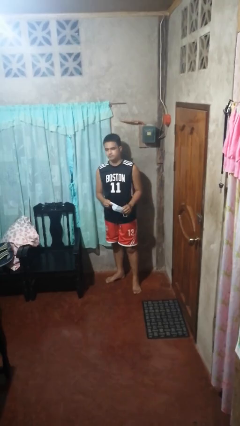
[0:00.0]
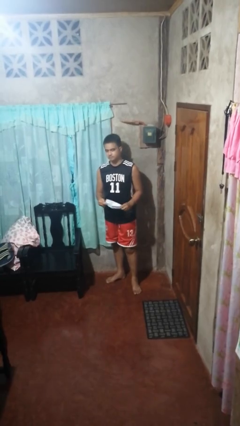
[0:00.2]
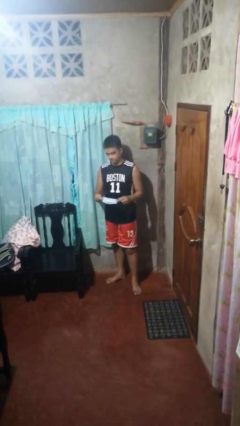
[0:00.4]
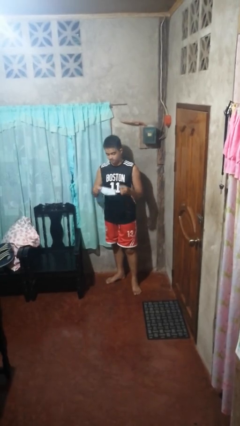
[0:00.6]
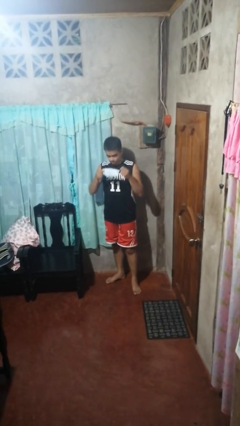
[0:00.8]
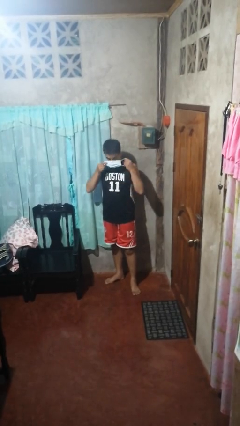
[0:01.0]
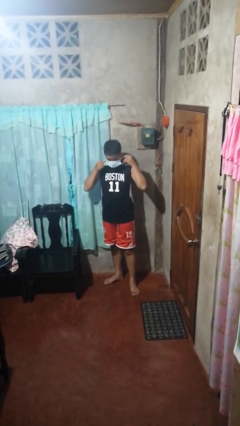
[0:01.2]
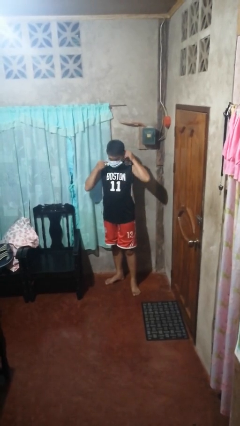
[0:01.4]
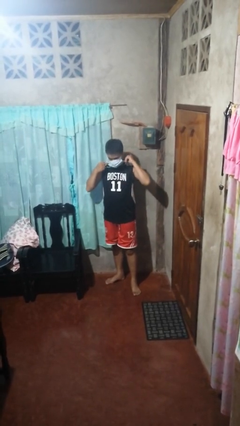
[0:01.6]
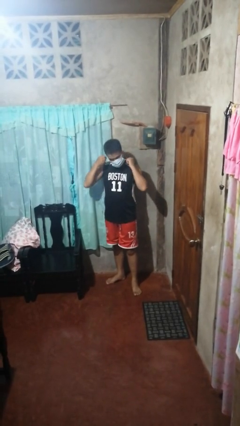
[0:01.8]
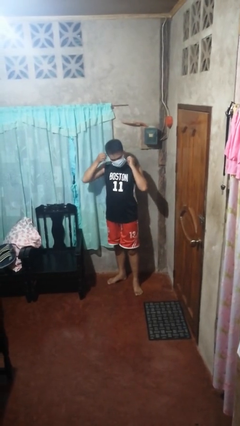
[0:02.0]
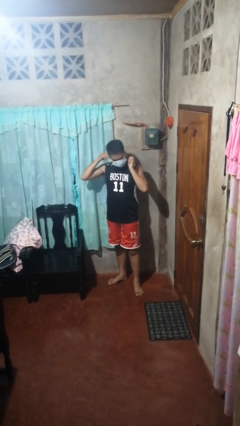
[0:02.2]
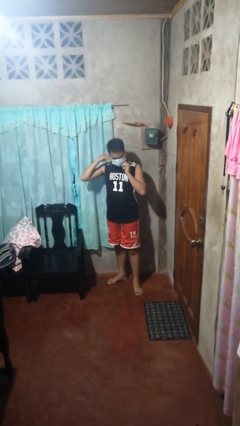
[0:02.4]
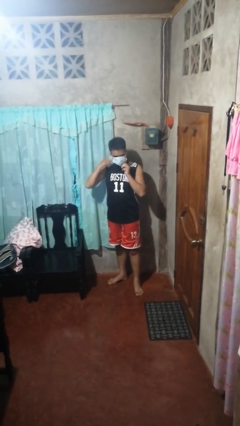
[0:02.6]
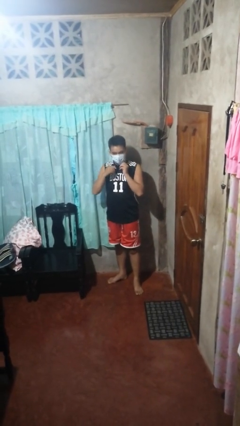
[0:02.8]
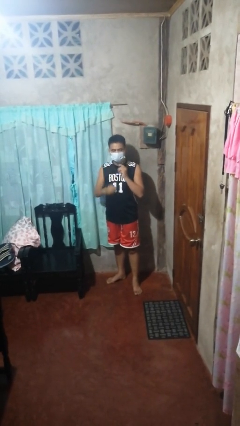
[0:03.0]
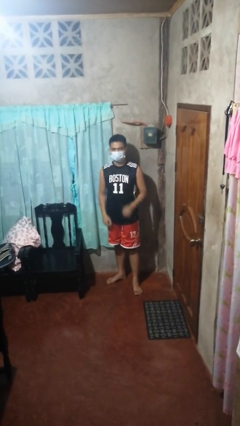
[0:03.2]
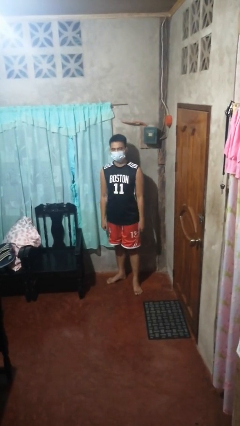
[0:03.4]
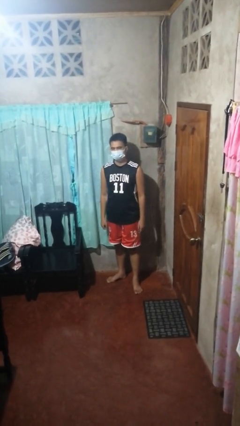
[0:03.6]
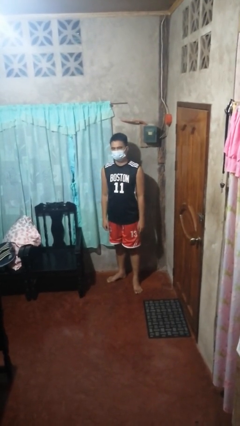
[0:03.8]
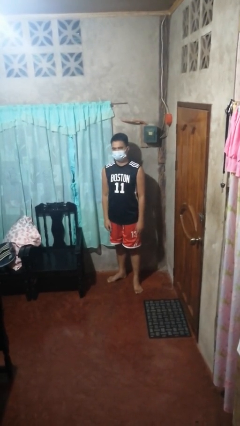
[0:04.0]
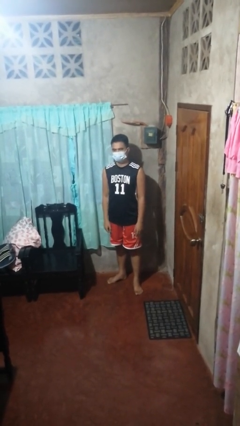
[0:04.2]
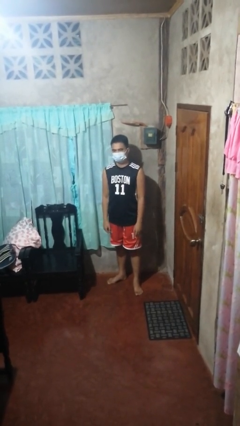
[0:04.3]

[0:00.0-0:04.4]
person puts on facemask

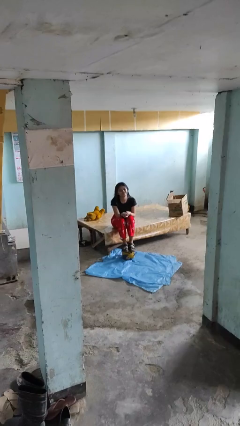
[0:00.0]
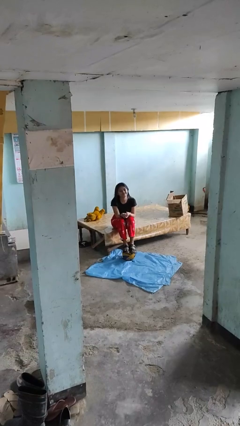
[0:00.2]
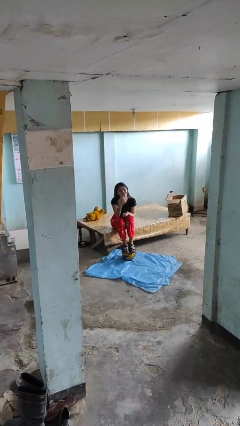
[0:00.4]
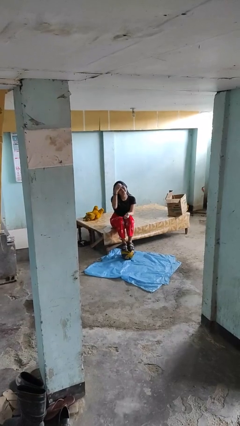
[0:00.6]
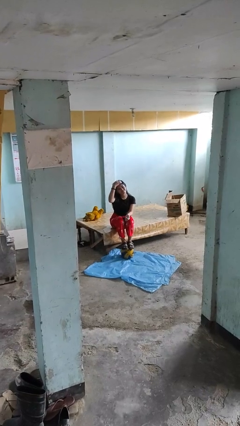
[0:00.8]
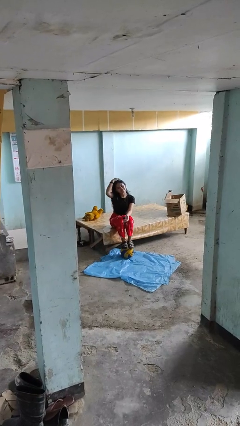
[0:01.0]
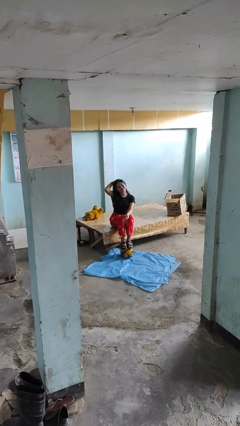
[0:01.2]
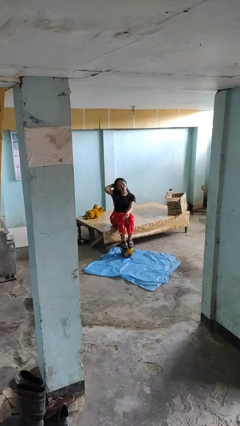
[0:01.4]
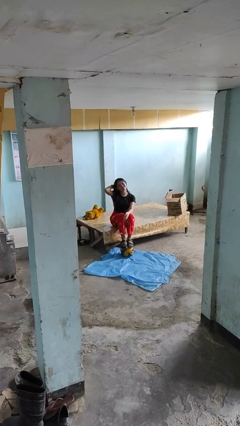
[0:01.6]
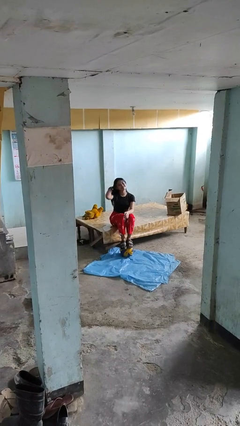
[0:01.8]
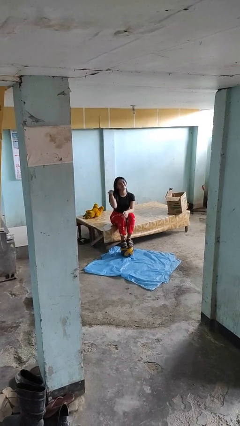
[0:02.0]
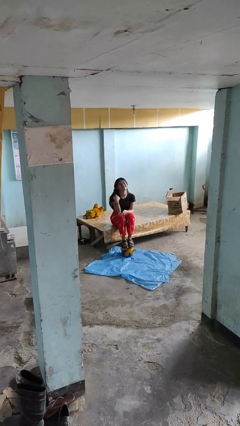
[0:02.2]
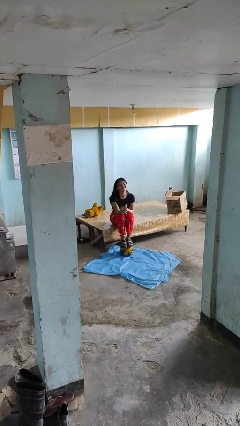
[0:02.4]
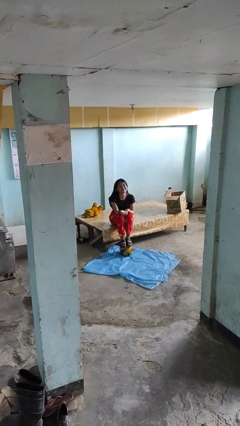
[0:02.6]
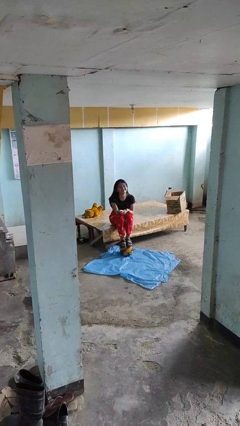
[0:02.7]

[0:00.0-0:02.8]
person strokes hair

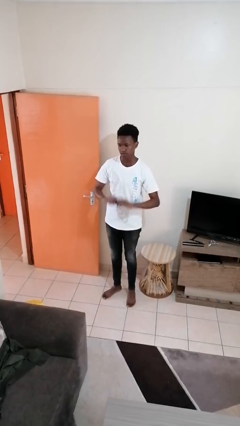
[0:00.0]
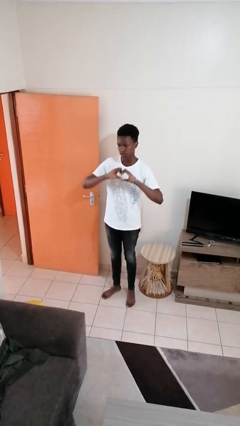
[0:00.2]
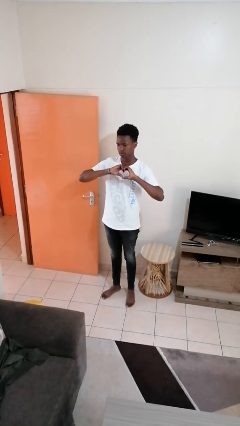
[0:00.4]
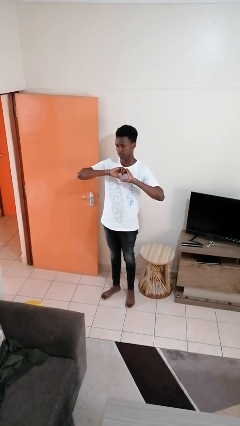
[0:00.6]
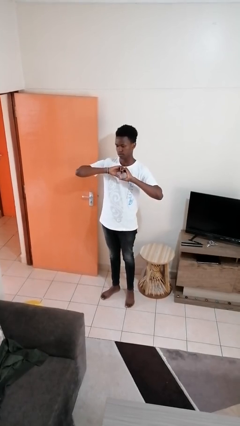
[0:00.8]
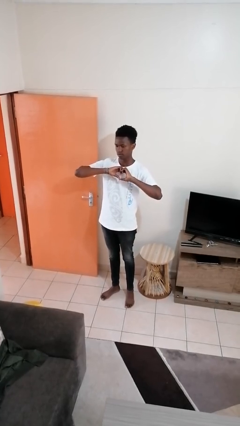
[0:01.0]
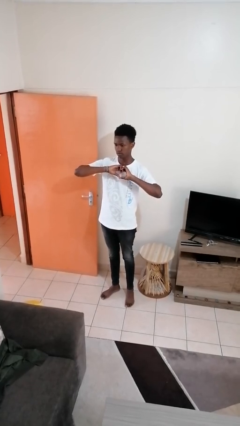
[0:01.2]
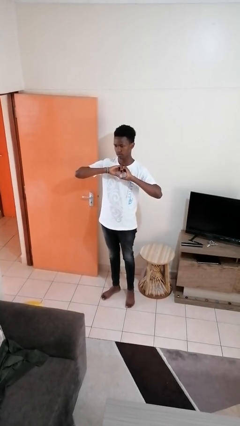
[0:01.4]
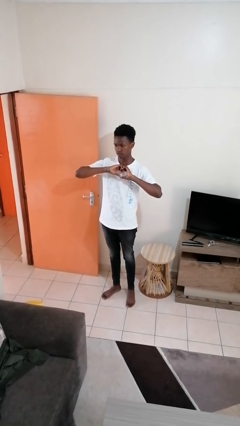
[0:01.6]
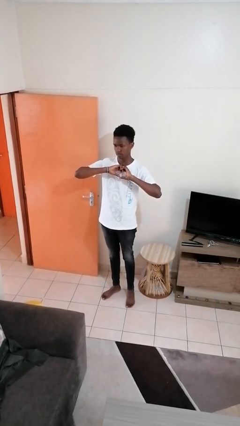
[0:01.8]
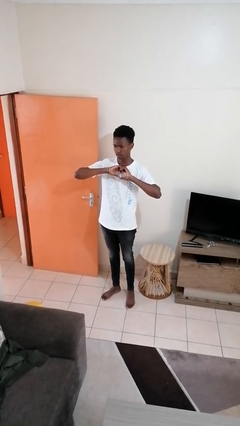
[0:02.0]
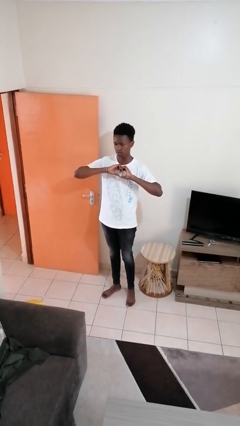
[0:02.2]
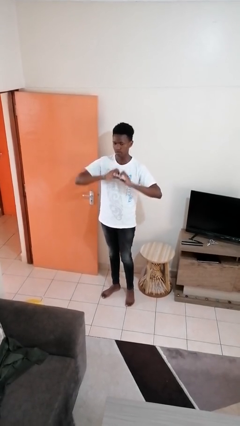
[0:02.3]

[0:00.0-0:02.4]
person gestures heart

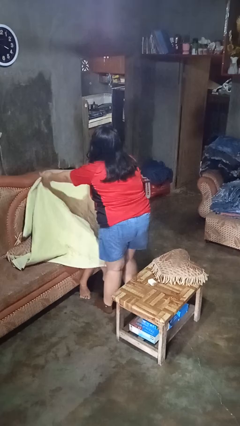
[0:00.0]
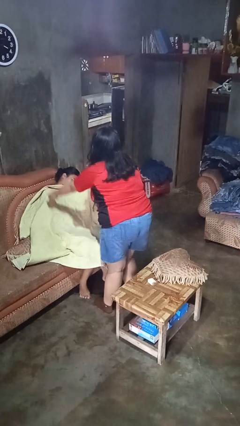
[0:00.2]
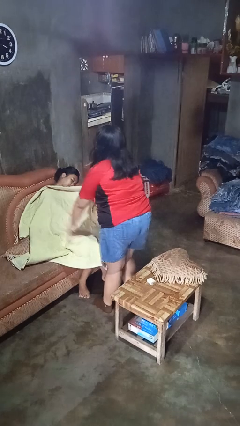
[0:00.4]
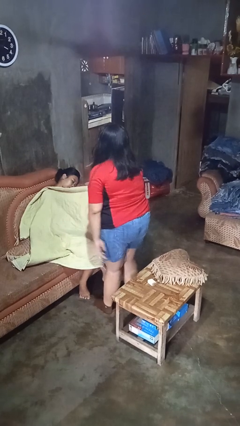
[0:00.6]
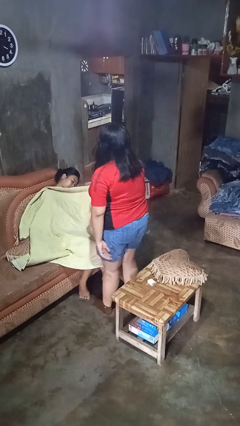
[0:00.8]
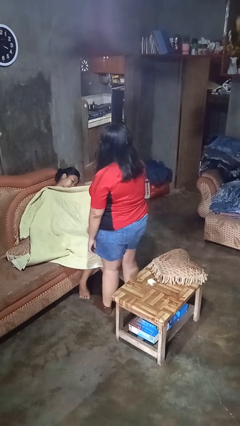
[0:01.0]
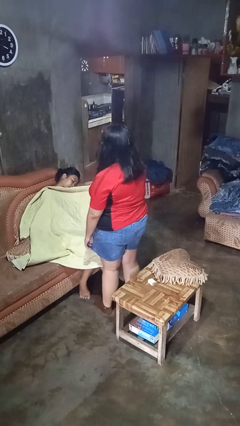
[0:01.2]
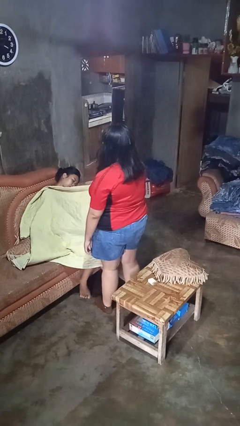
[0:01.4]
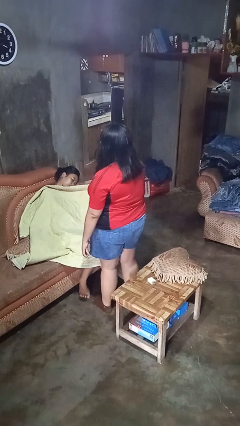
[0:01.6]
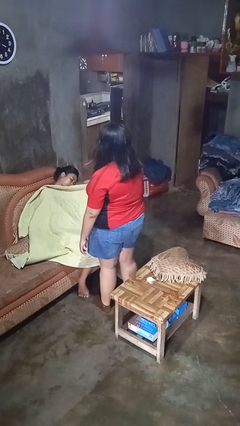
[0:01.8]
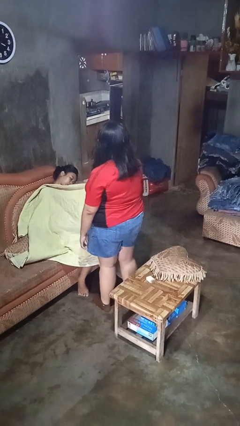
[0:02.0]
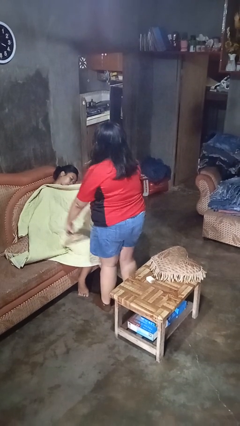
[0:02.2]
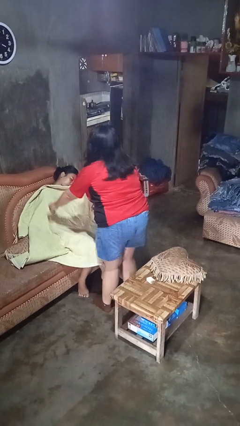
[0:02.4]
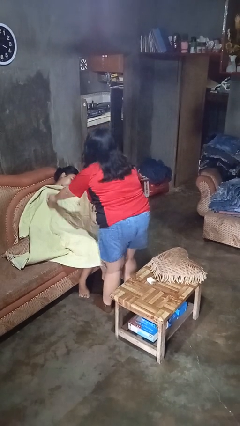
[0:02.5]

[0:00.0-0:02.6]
person covers friend with blanket

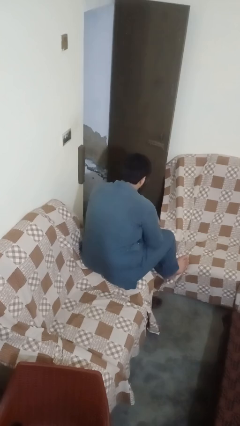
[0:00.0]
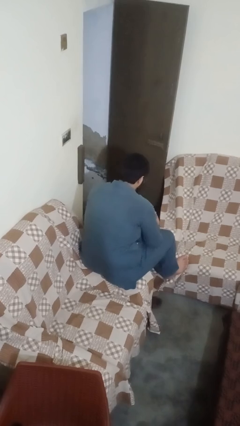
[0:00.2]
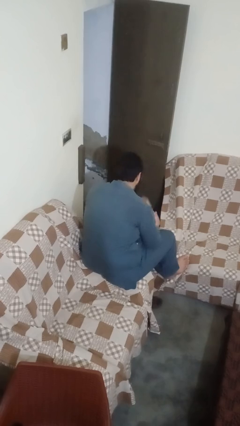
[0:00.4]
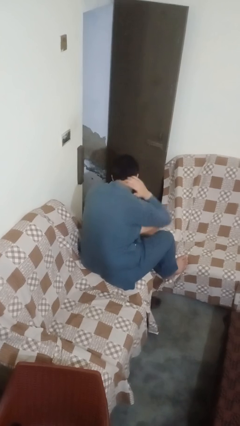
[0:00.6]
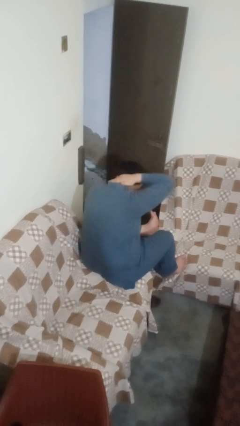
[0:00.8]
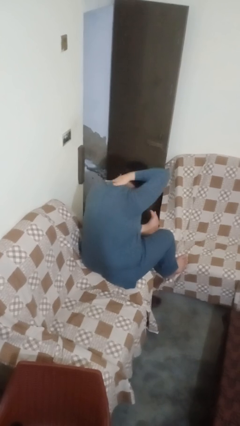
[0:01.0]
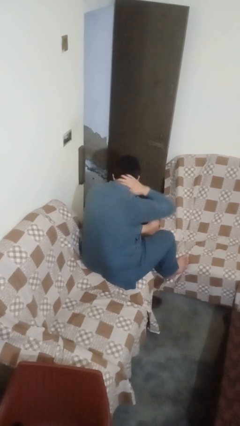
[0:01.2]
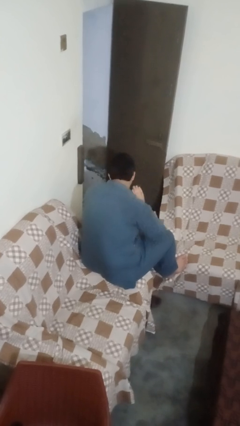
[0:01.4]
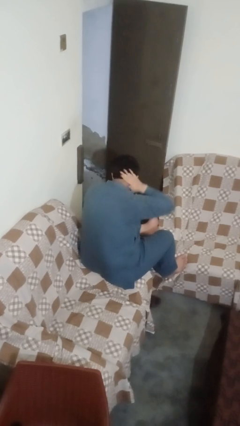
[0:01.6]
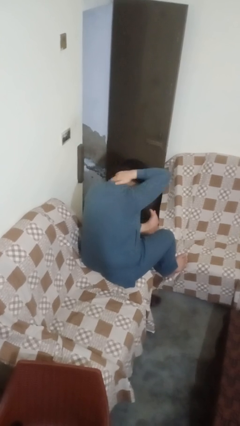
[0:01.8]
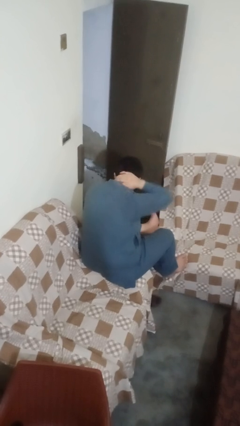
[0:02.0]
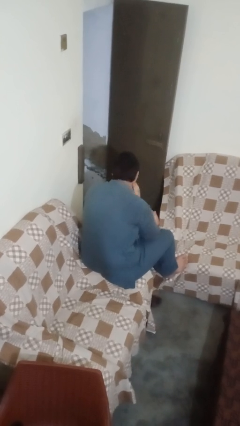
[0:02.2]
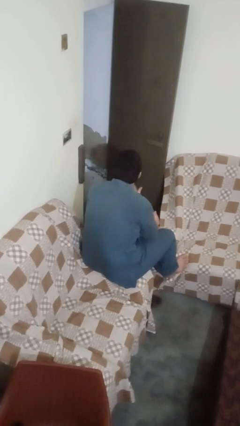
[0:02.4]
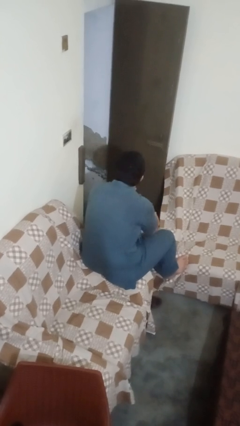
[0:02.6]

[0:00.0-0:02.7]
person rubs neck

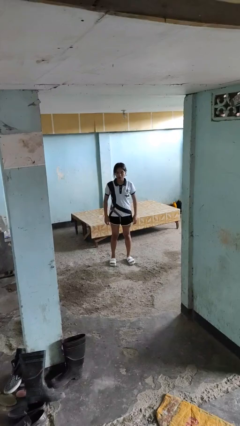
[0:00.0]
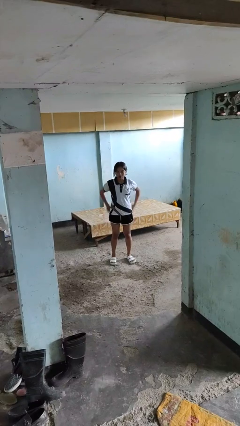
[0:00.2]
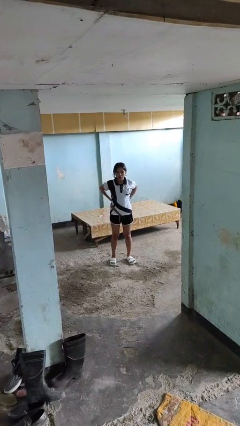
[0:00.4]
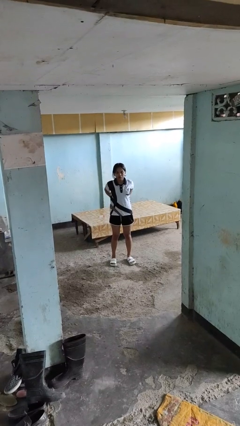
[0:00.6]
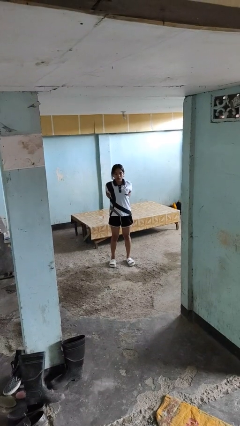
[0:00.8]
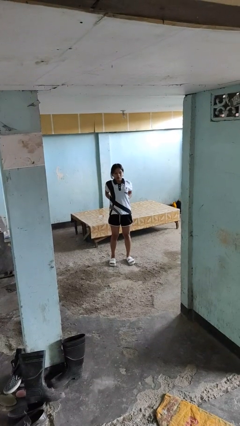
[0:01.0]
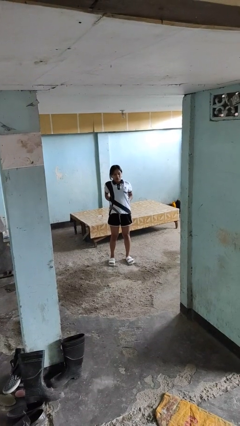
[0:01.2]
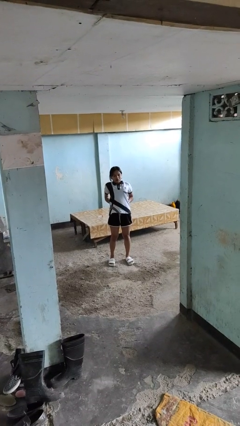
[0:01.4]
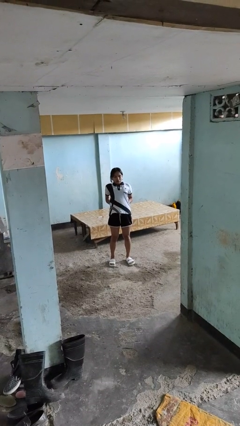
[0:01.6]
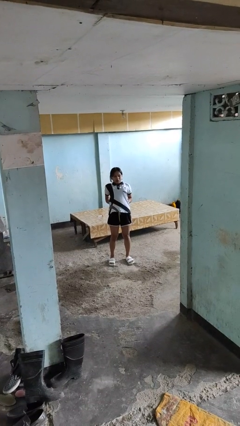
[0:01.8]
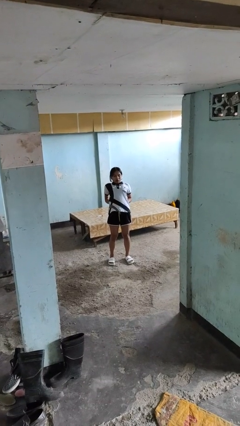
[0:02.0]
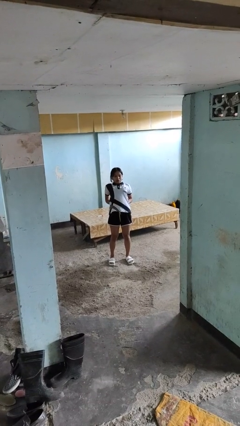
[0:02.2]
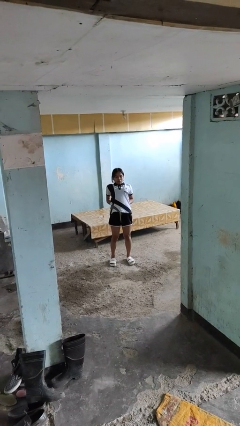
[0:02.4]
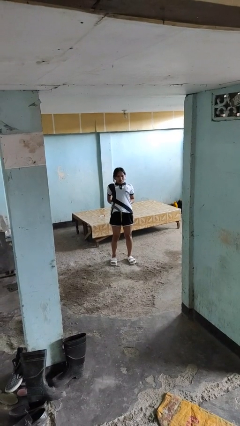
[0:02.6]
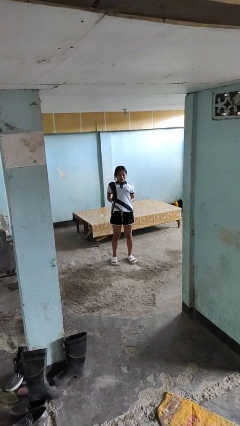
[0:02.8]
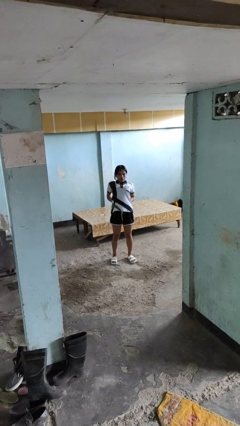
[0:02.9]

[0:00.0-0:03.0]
person stretches back
